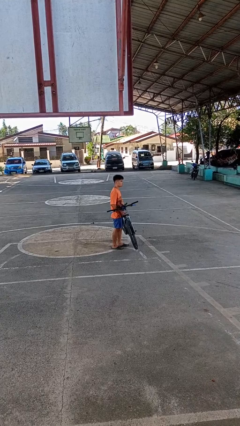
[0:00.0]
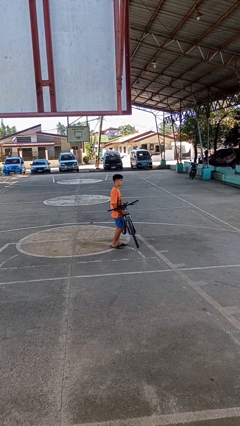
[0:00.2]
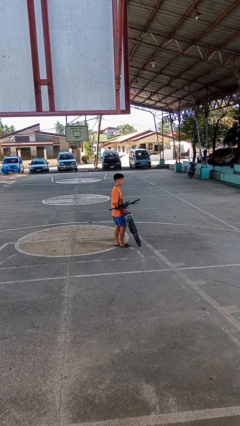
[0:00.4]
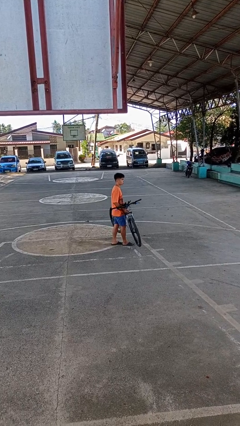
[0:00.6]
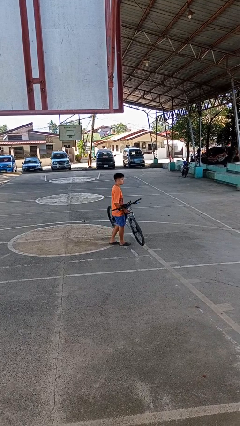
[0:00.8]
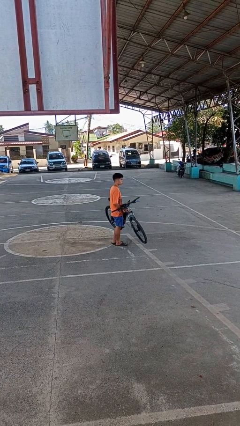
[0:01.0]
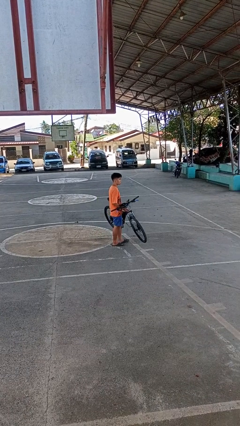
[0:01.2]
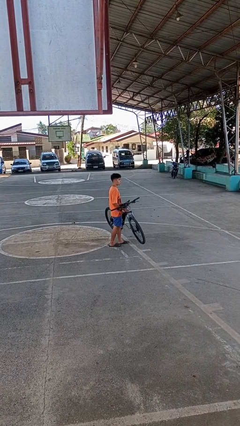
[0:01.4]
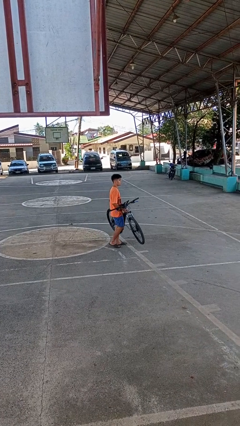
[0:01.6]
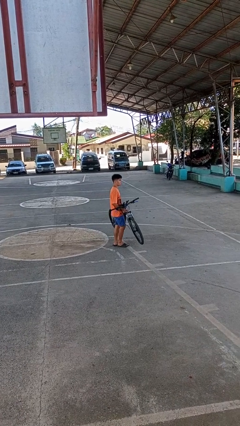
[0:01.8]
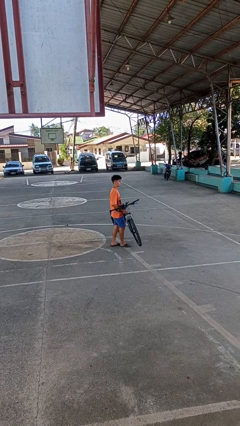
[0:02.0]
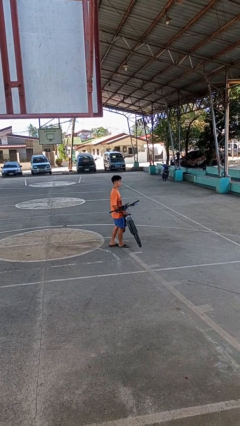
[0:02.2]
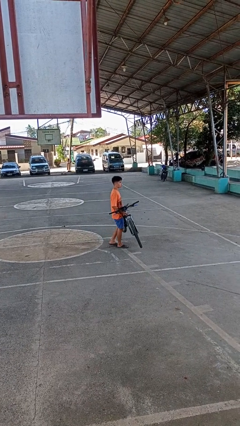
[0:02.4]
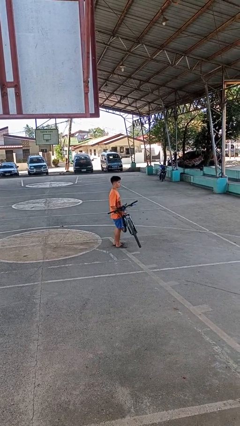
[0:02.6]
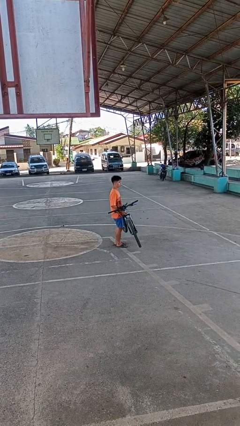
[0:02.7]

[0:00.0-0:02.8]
person carries bicycle

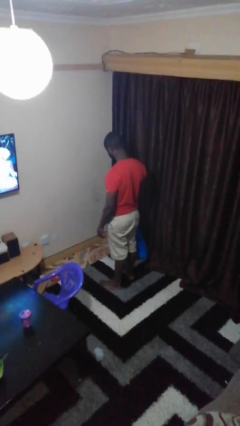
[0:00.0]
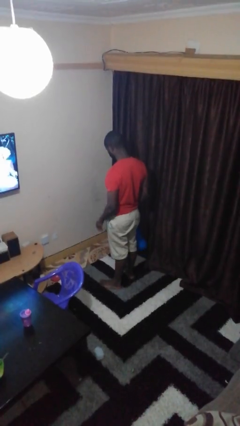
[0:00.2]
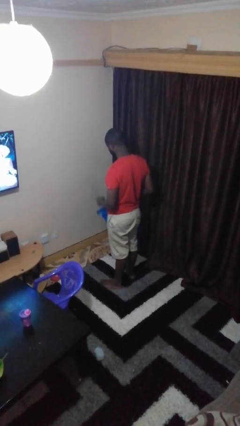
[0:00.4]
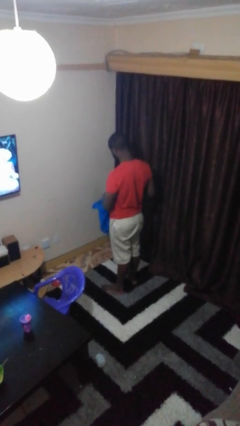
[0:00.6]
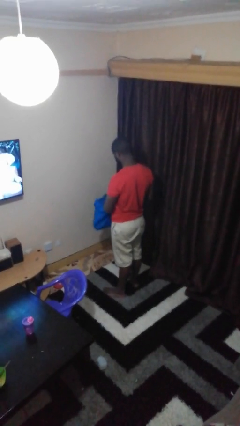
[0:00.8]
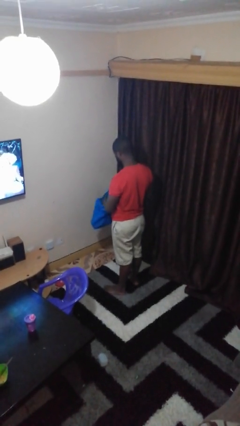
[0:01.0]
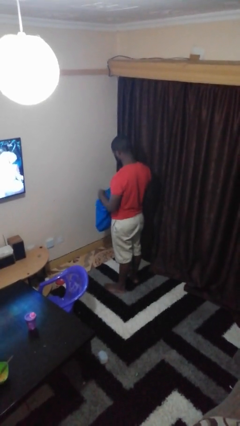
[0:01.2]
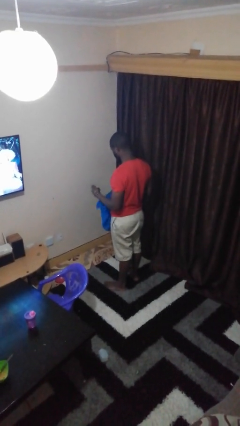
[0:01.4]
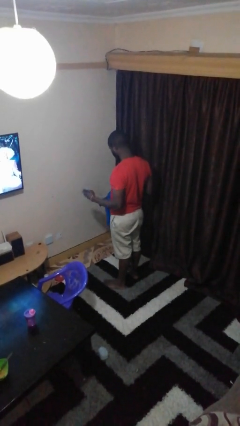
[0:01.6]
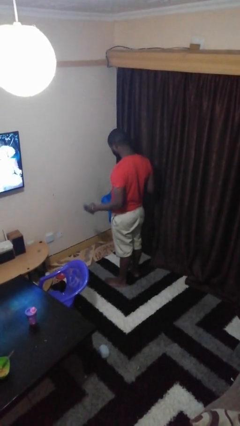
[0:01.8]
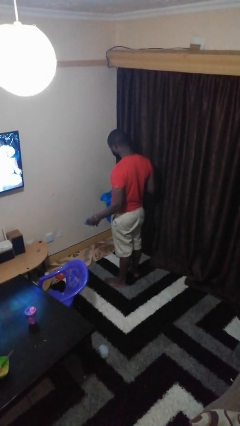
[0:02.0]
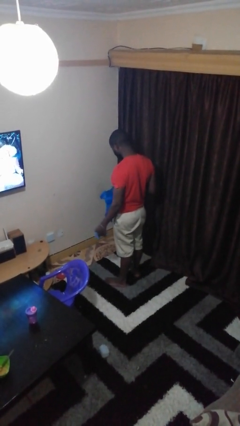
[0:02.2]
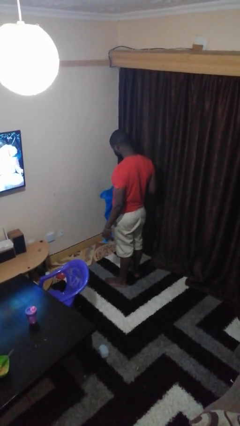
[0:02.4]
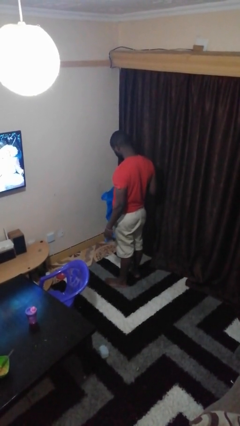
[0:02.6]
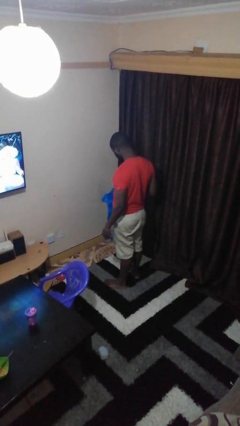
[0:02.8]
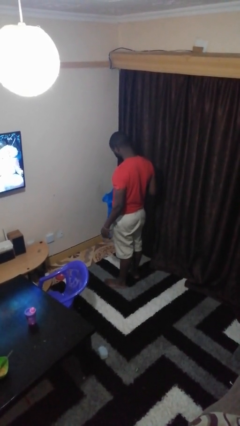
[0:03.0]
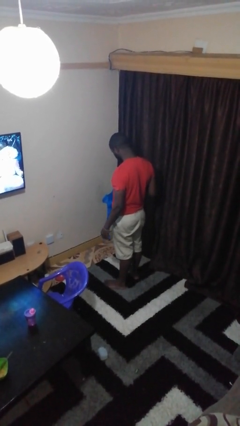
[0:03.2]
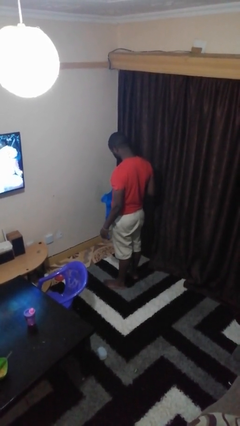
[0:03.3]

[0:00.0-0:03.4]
person takes object from bag

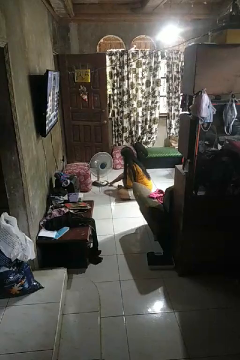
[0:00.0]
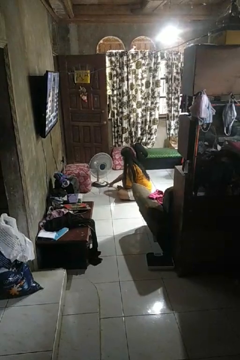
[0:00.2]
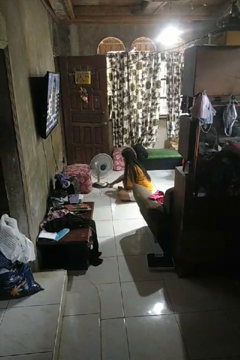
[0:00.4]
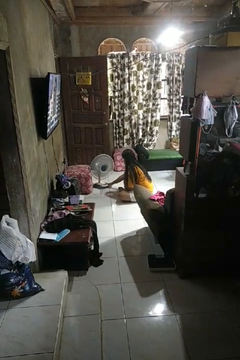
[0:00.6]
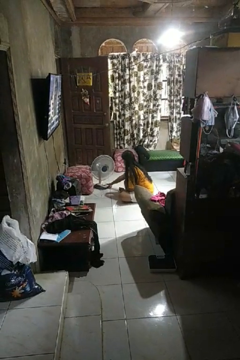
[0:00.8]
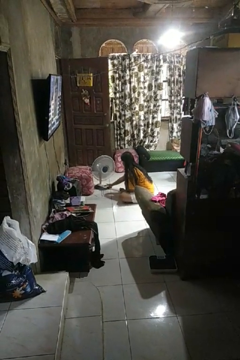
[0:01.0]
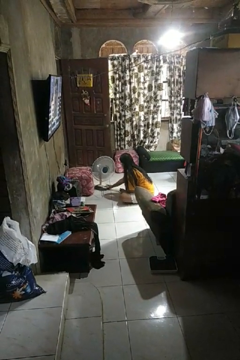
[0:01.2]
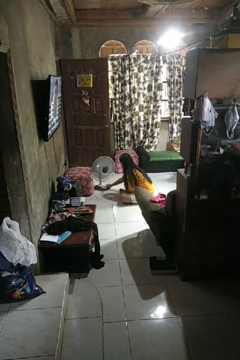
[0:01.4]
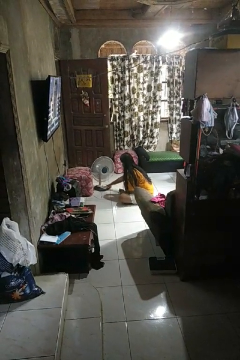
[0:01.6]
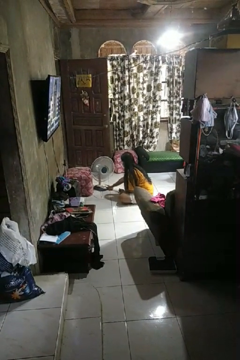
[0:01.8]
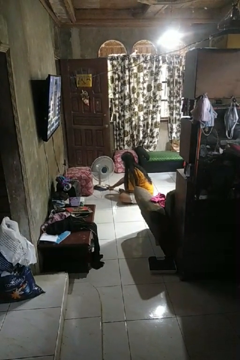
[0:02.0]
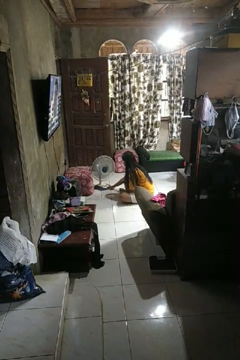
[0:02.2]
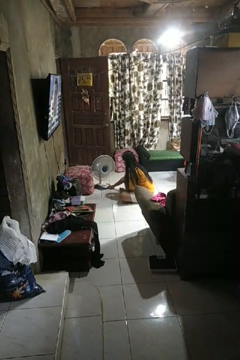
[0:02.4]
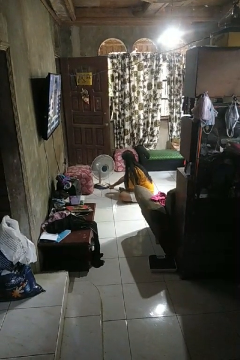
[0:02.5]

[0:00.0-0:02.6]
person turns on fan

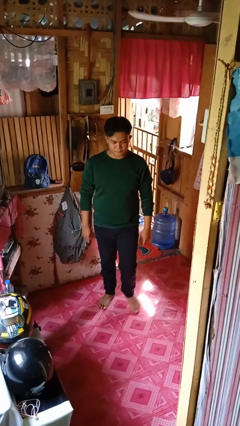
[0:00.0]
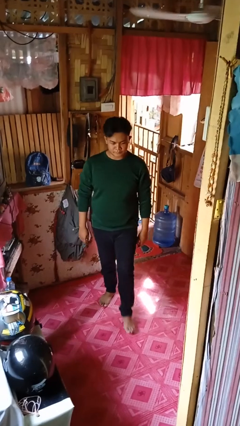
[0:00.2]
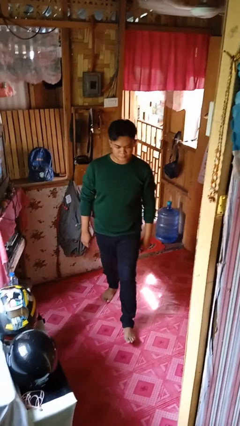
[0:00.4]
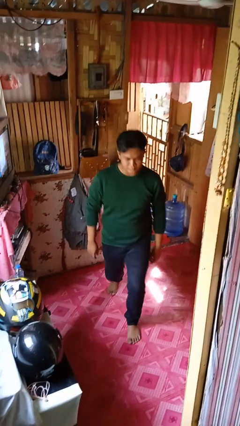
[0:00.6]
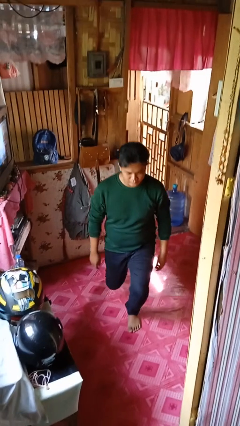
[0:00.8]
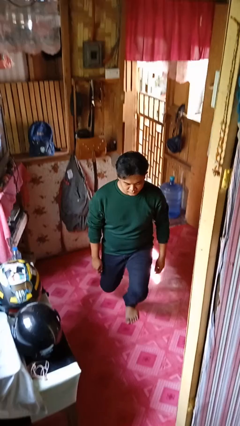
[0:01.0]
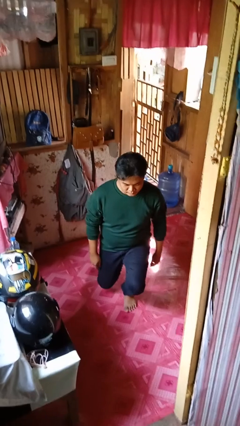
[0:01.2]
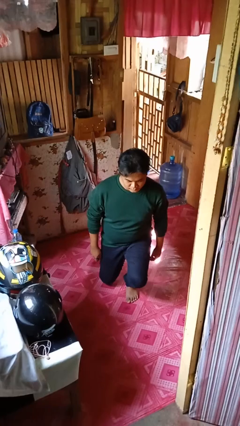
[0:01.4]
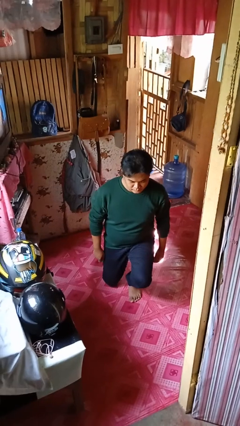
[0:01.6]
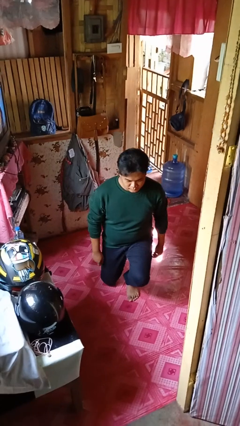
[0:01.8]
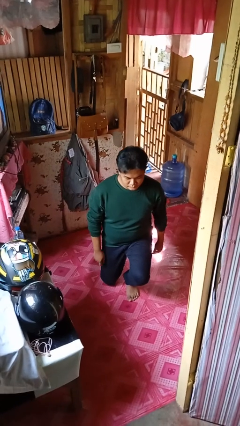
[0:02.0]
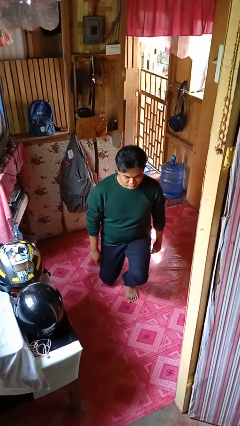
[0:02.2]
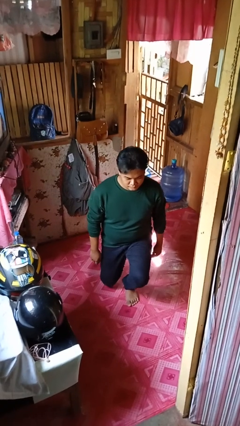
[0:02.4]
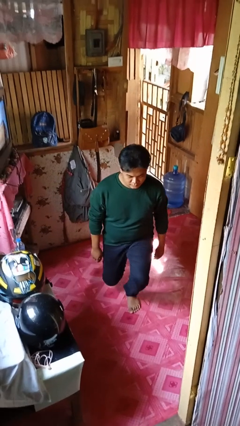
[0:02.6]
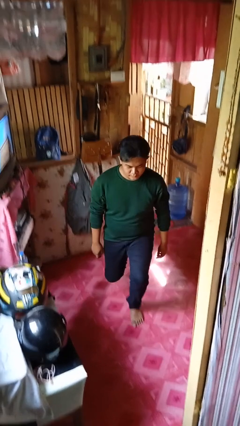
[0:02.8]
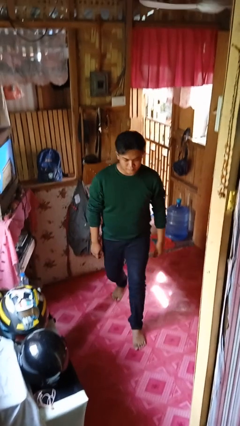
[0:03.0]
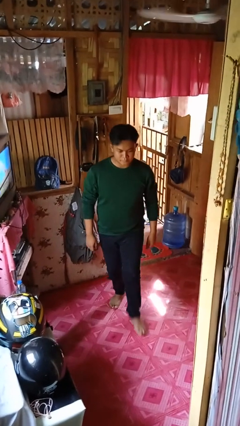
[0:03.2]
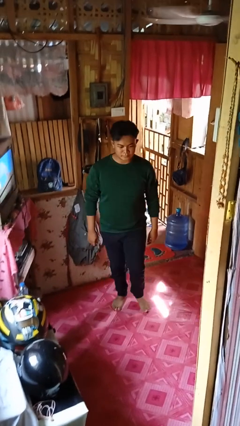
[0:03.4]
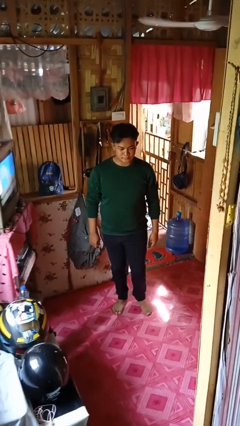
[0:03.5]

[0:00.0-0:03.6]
person exercises with lunges

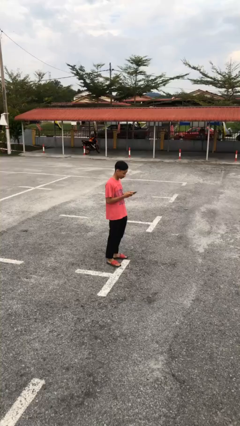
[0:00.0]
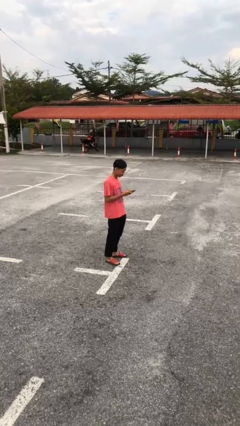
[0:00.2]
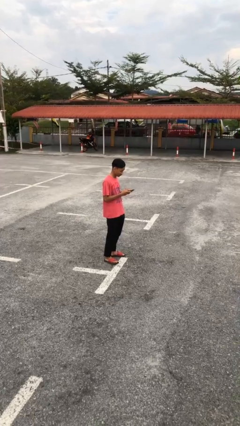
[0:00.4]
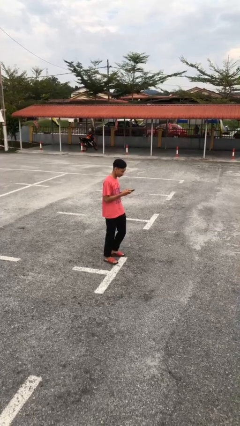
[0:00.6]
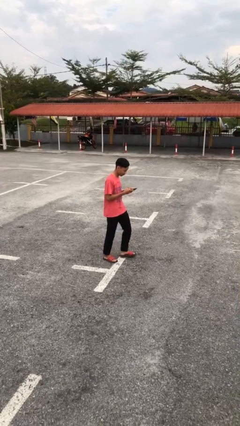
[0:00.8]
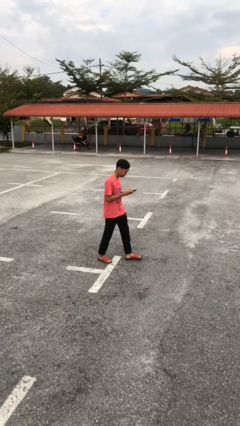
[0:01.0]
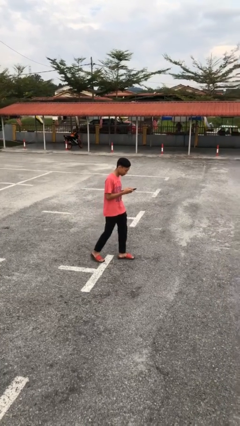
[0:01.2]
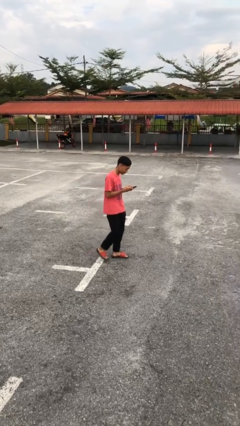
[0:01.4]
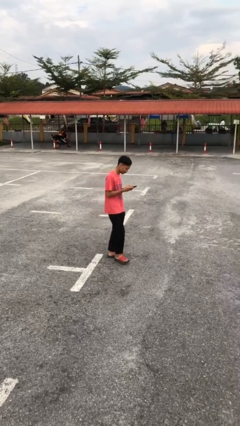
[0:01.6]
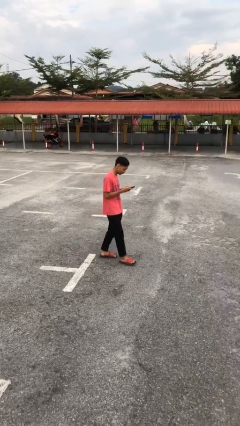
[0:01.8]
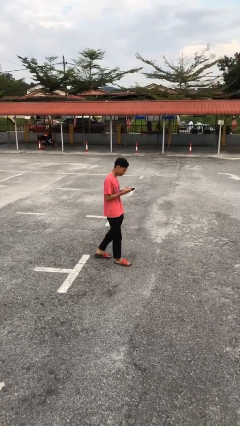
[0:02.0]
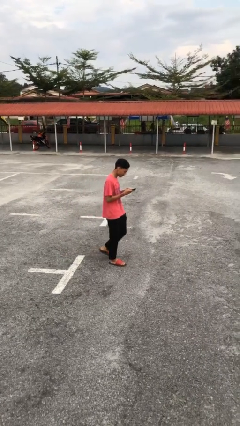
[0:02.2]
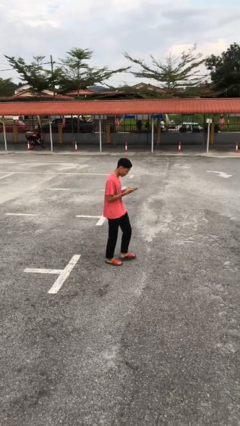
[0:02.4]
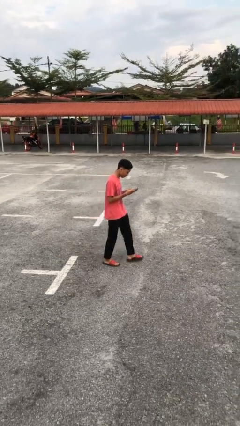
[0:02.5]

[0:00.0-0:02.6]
person texts on phone

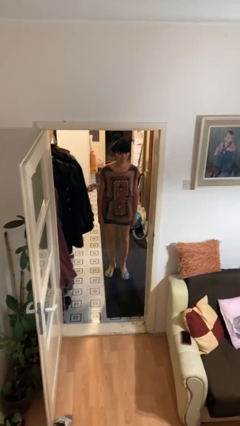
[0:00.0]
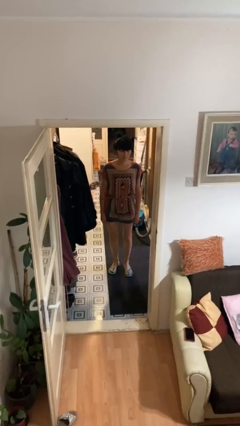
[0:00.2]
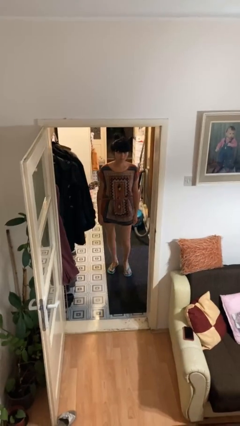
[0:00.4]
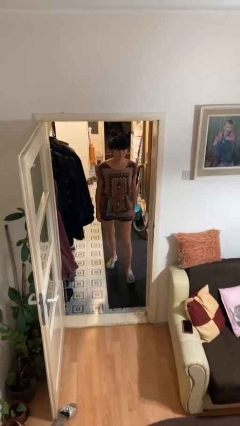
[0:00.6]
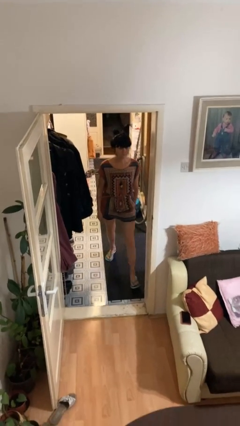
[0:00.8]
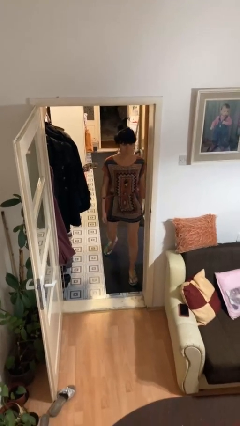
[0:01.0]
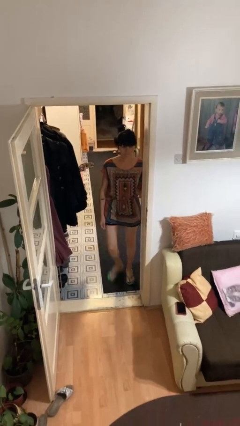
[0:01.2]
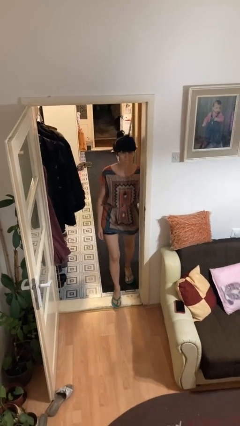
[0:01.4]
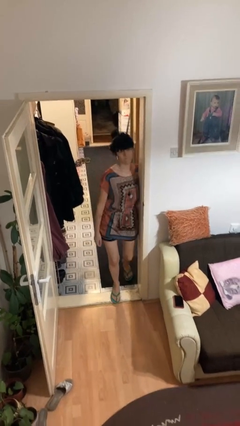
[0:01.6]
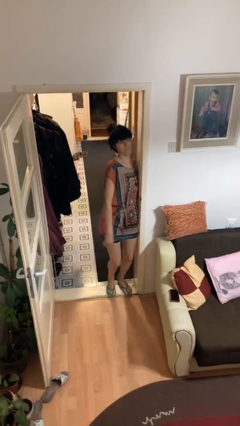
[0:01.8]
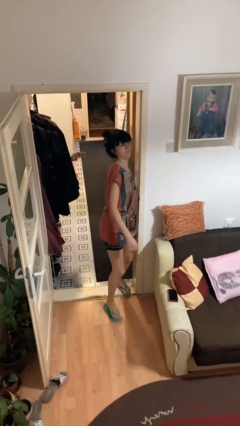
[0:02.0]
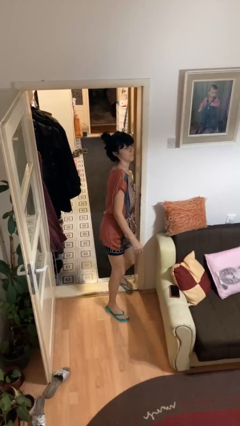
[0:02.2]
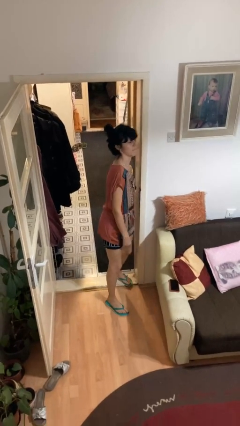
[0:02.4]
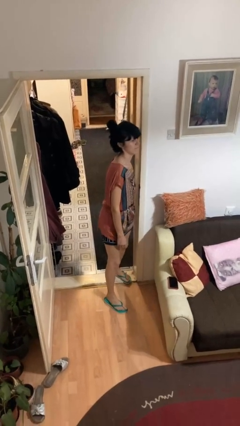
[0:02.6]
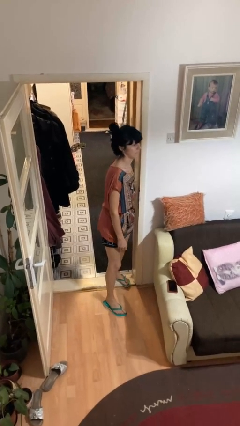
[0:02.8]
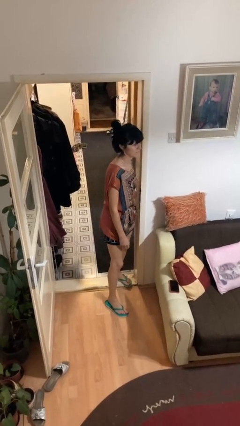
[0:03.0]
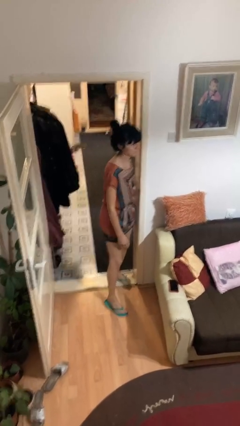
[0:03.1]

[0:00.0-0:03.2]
person bumps into wall
